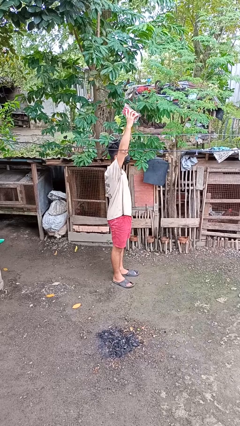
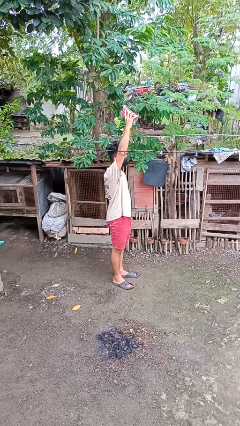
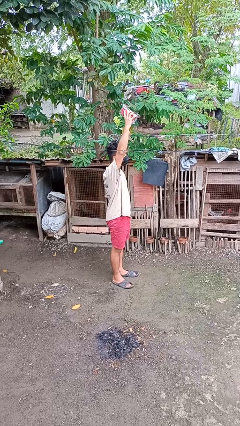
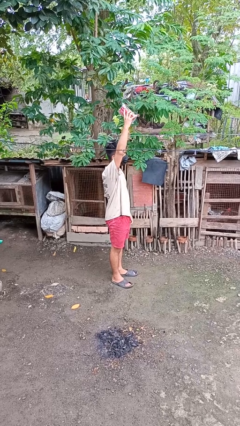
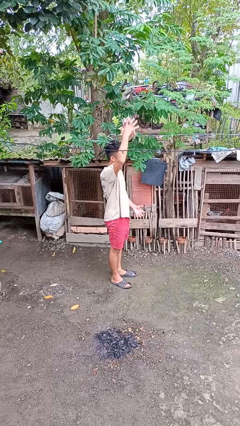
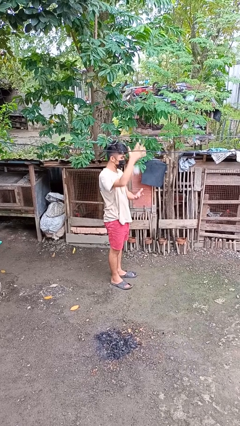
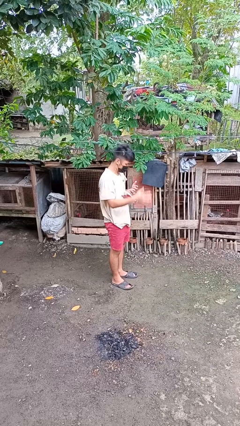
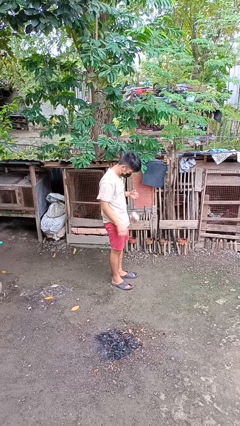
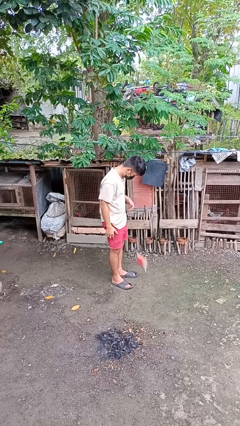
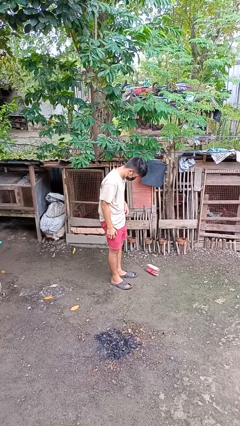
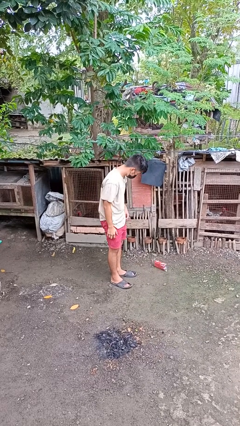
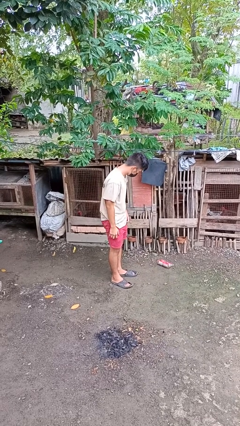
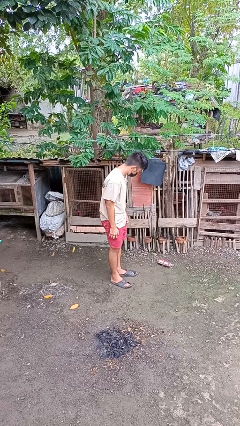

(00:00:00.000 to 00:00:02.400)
person drops object

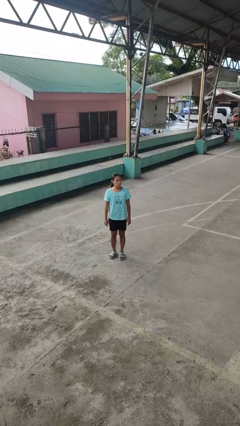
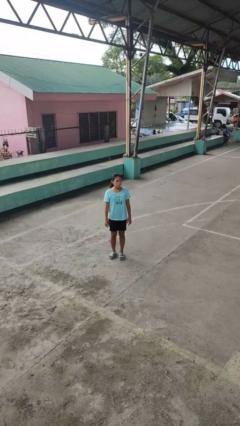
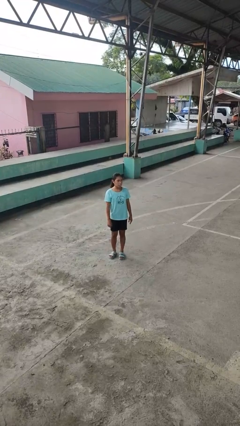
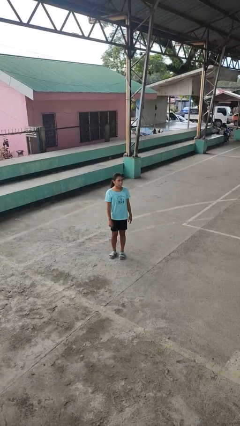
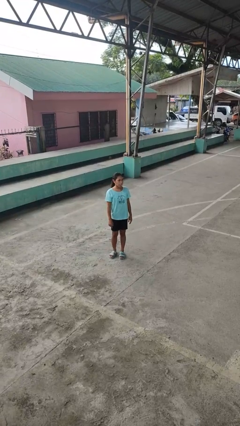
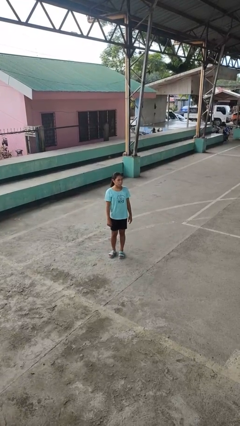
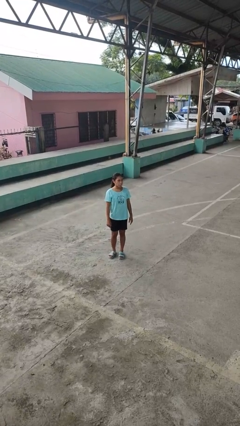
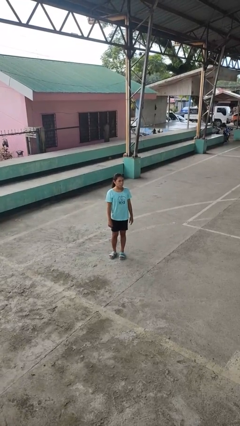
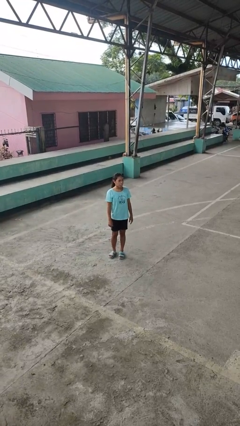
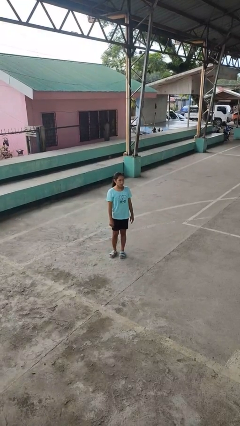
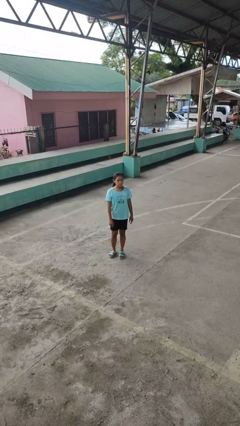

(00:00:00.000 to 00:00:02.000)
person sticks out tongue

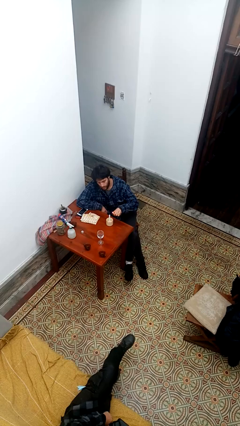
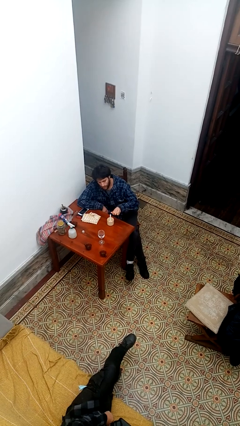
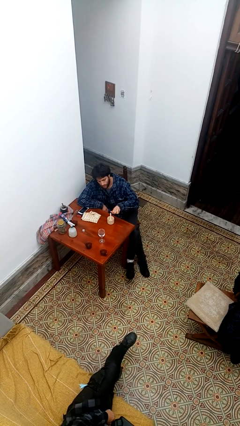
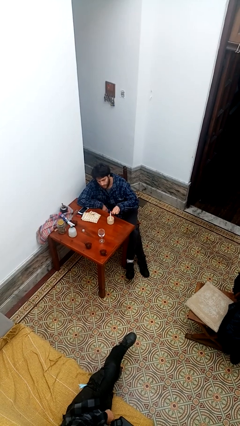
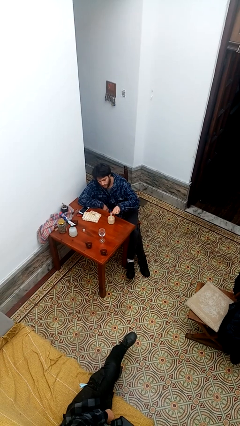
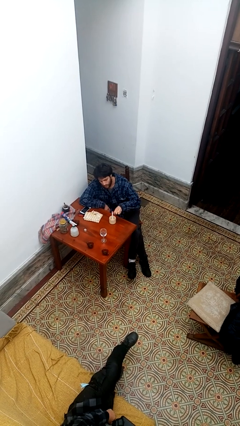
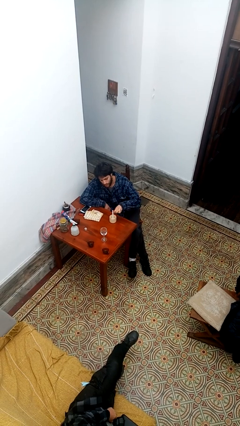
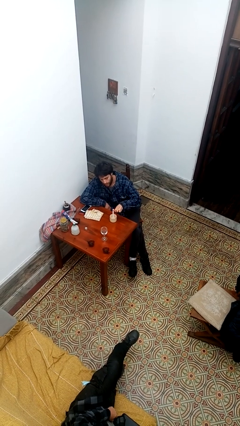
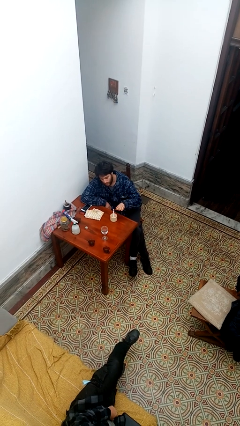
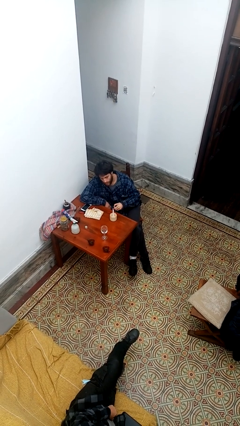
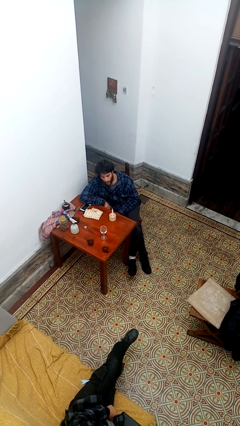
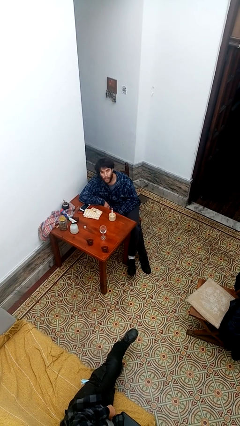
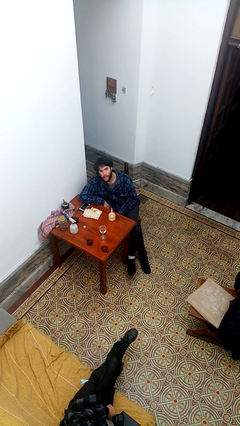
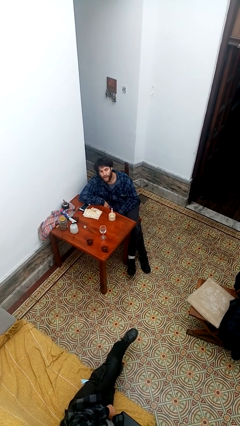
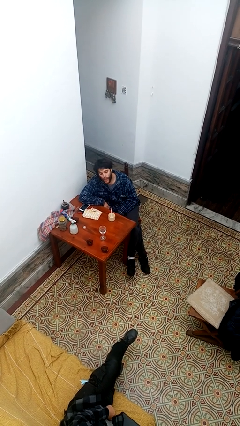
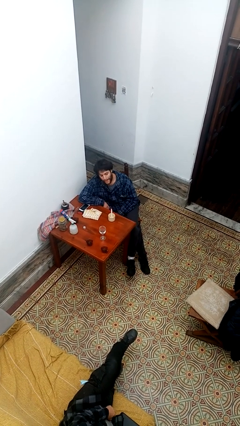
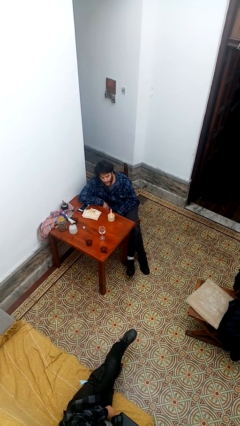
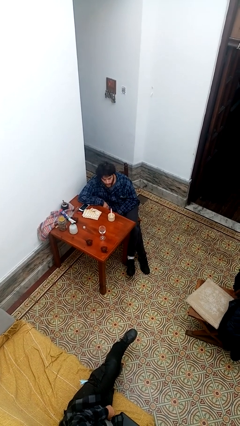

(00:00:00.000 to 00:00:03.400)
person lights candle

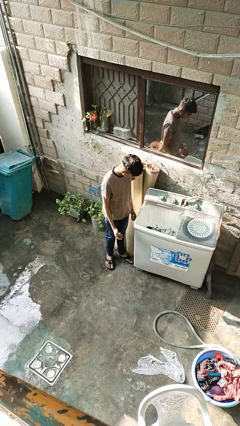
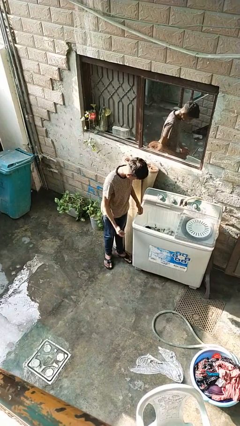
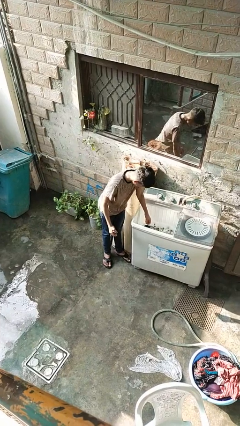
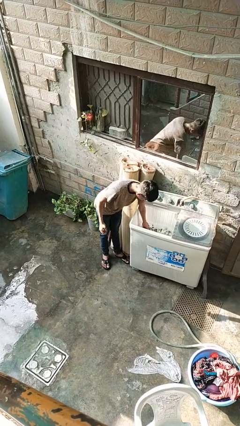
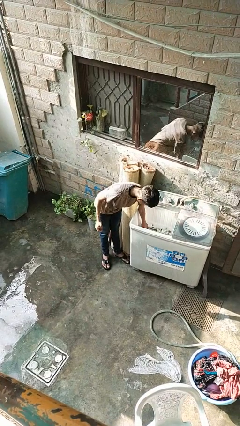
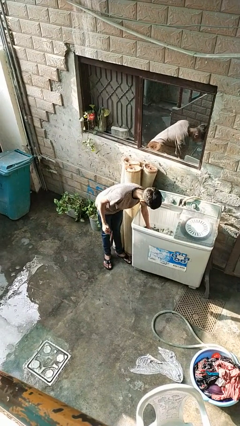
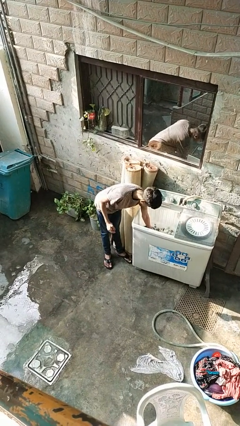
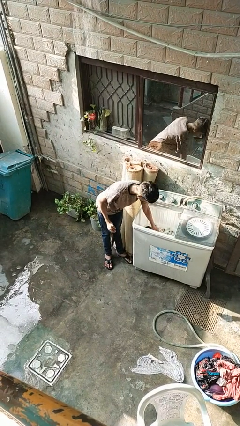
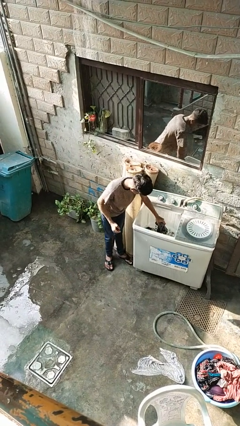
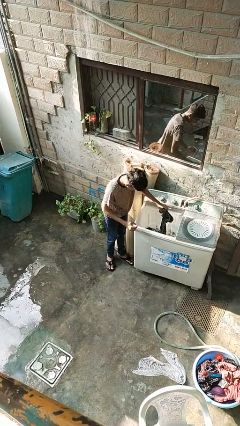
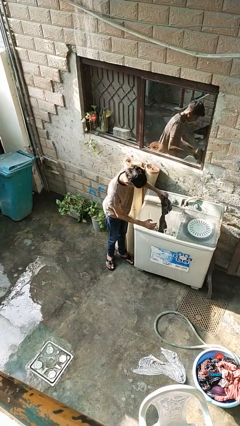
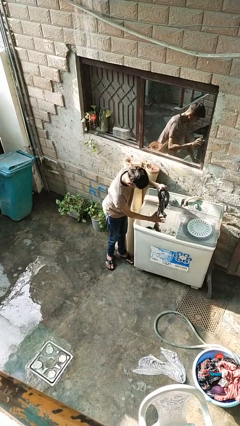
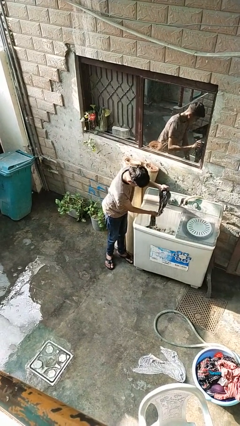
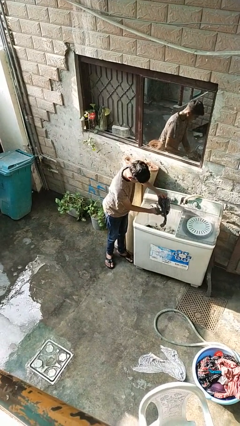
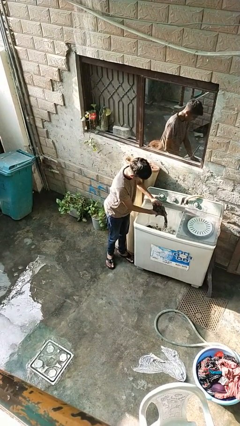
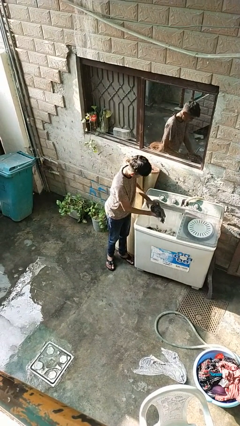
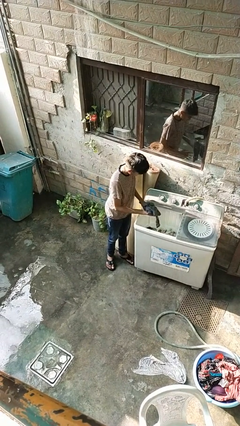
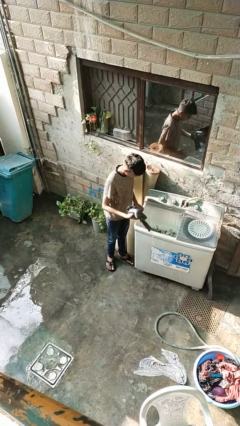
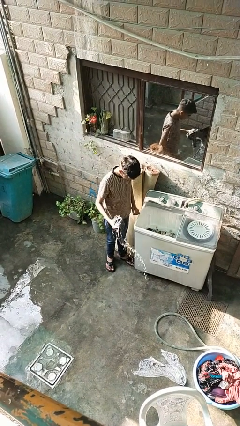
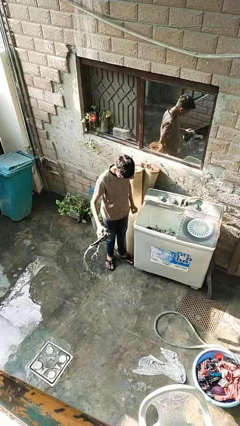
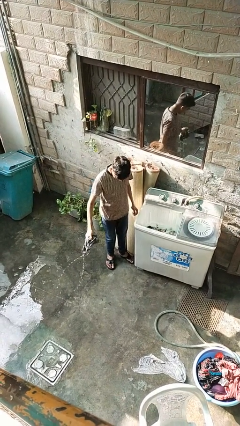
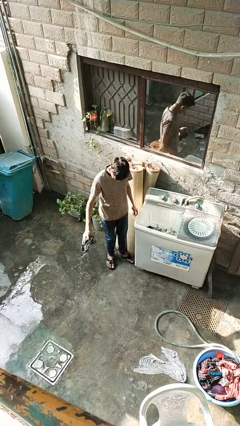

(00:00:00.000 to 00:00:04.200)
person unloads clotheswasher

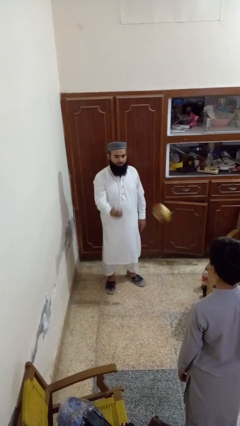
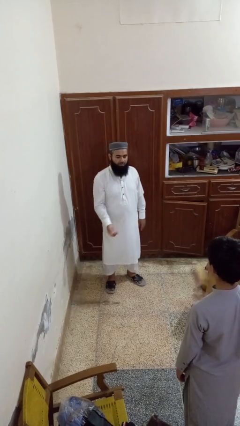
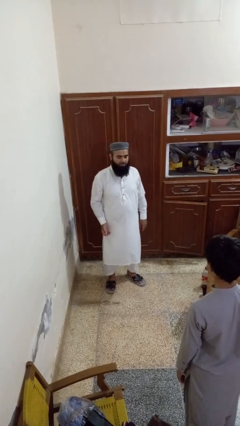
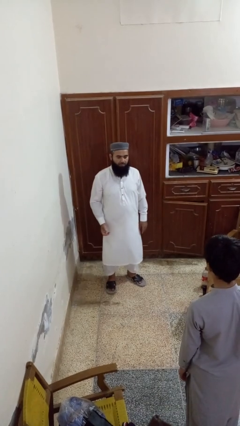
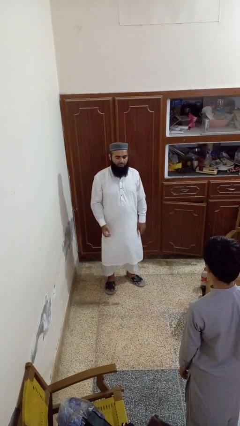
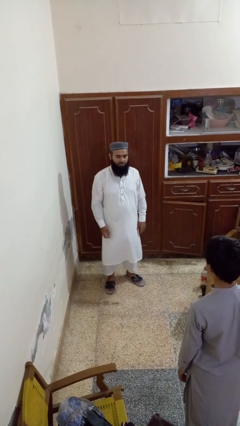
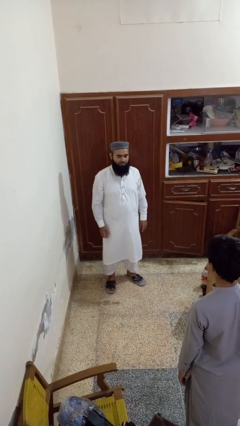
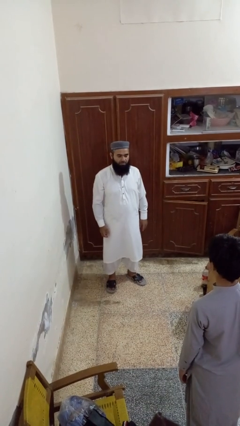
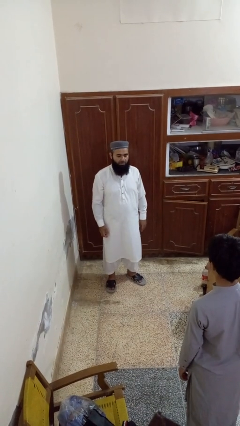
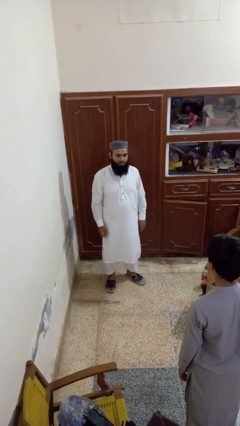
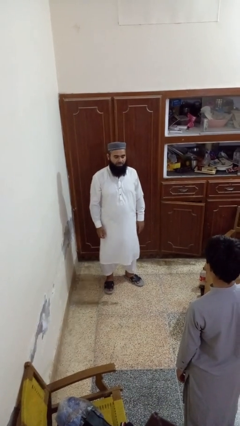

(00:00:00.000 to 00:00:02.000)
person throws object to person

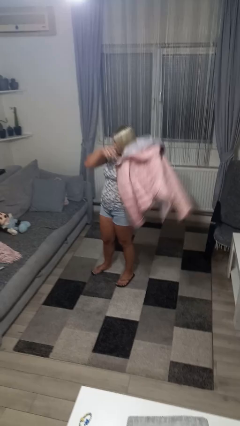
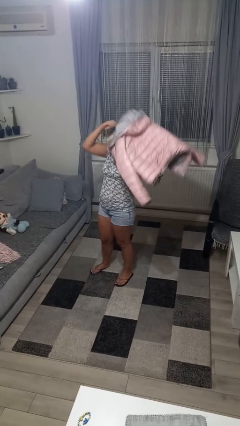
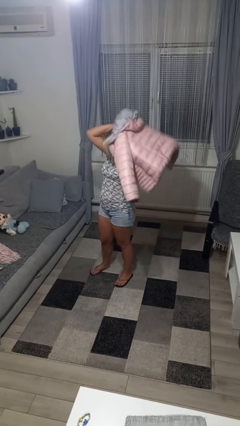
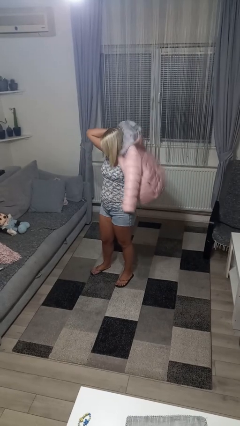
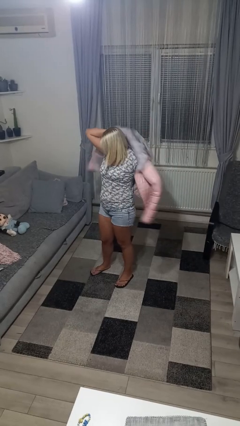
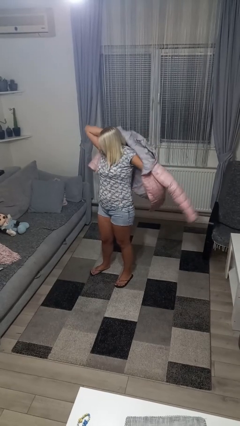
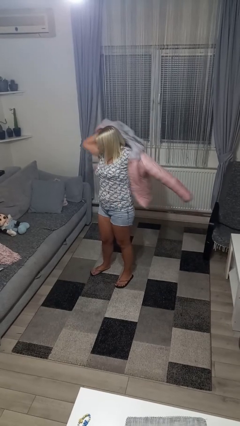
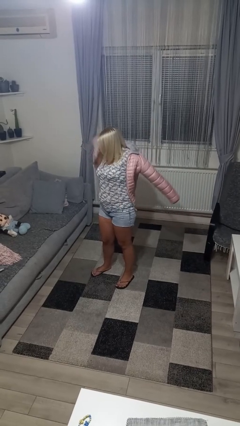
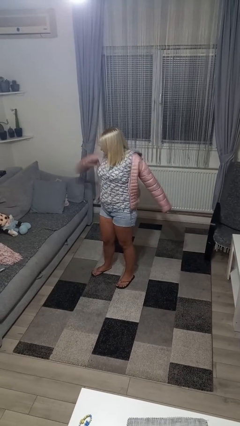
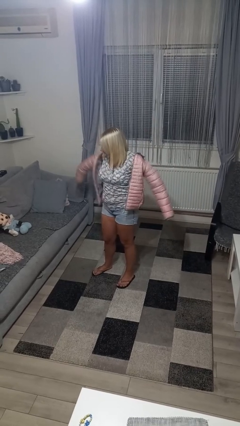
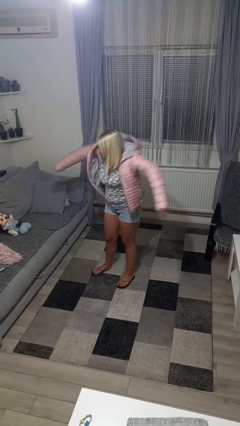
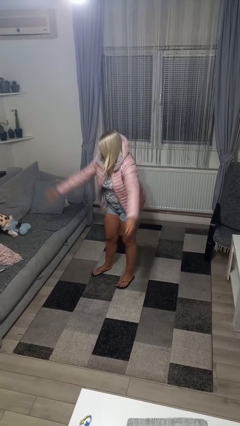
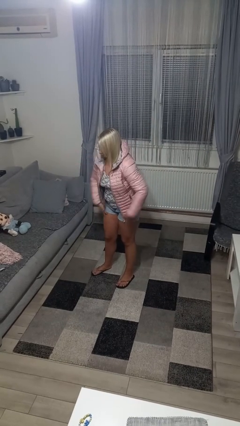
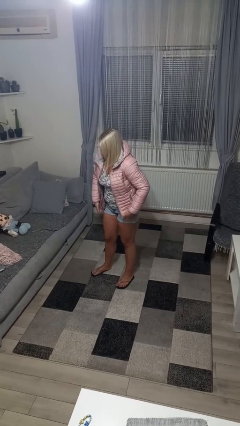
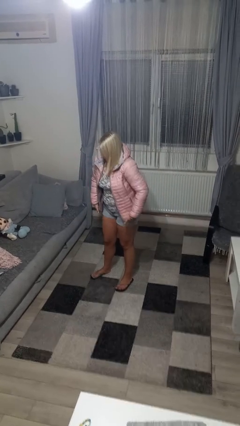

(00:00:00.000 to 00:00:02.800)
person puts on jacket

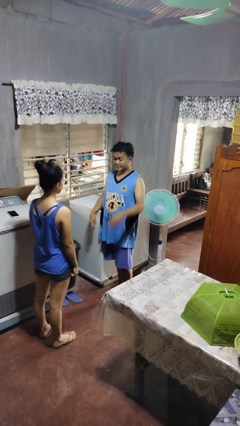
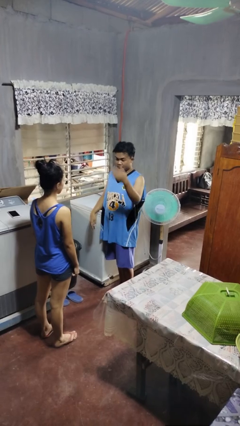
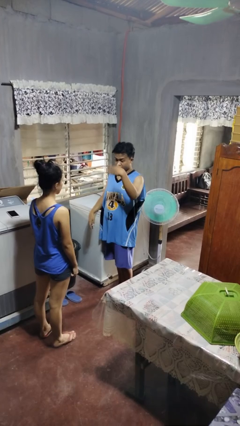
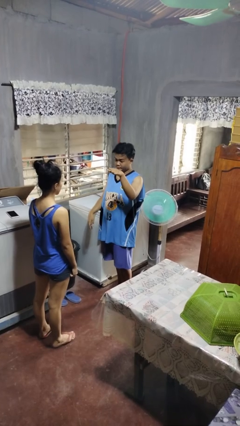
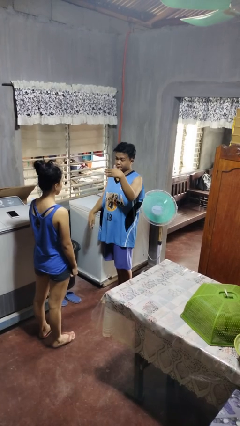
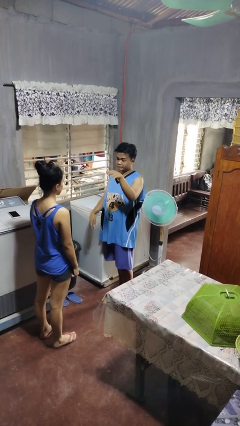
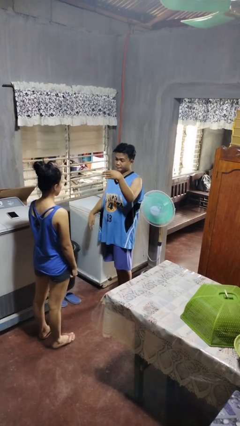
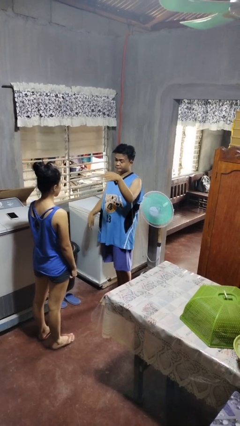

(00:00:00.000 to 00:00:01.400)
person shoves person
